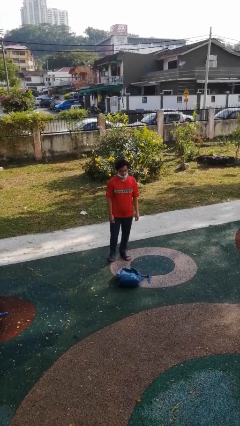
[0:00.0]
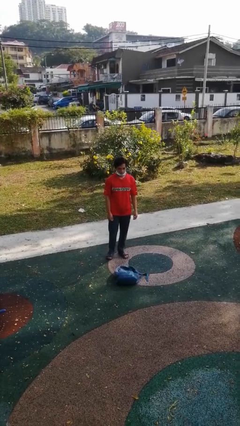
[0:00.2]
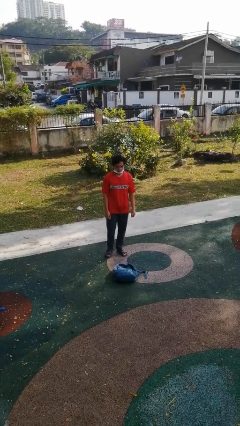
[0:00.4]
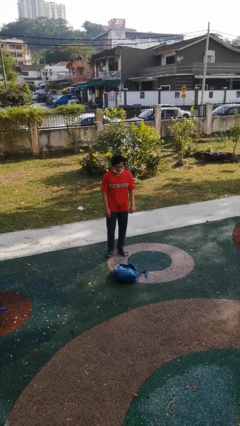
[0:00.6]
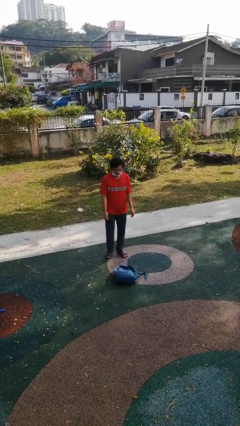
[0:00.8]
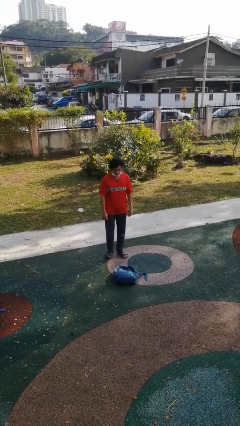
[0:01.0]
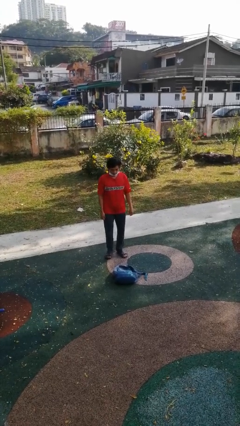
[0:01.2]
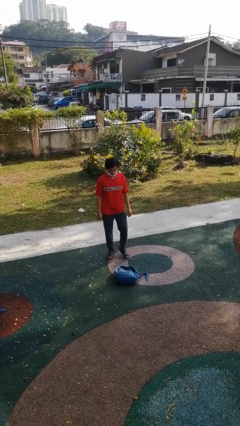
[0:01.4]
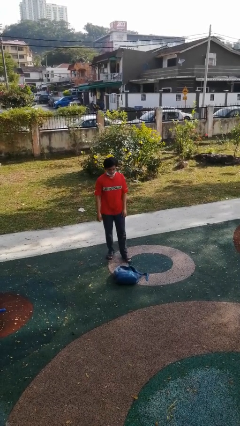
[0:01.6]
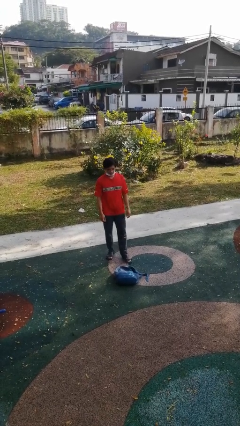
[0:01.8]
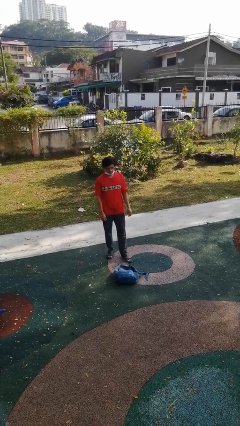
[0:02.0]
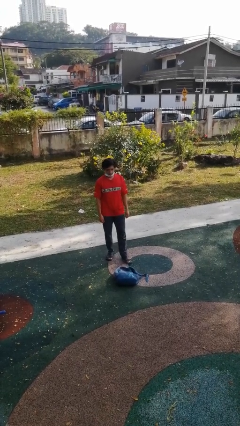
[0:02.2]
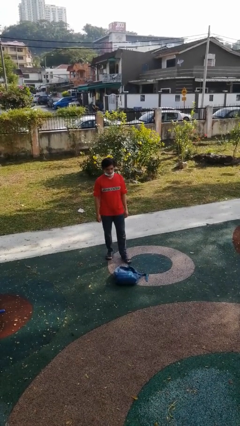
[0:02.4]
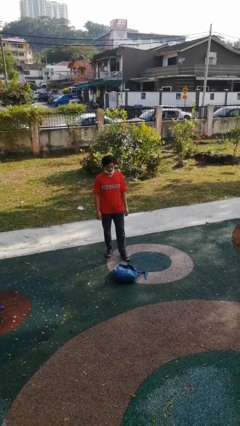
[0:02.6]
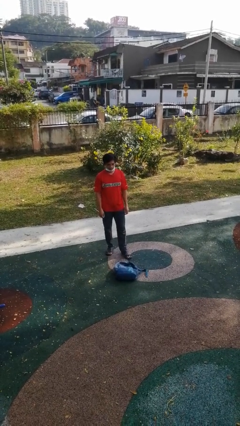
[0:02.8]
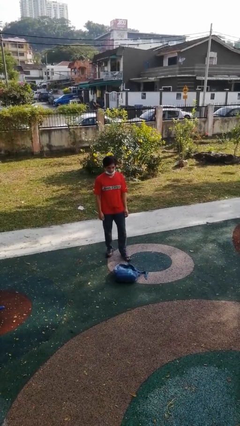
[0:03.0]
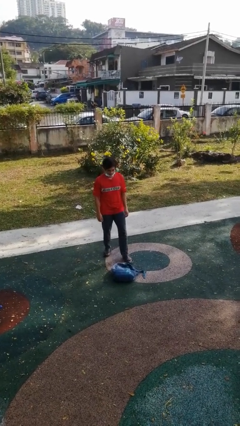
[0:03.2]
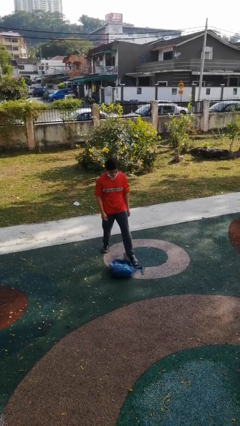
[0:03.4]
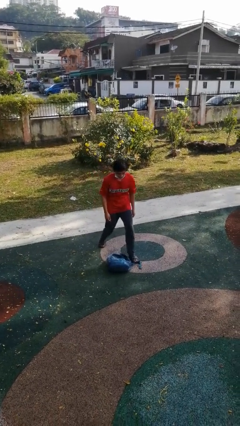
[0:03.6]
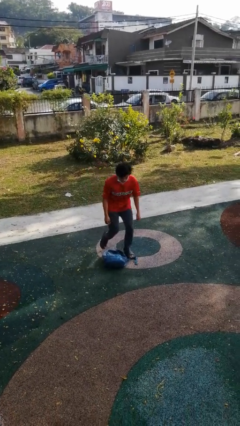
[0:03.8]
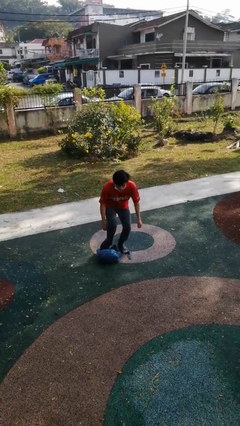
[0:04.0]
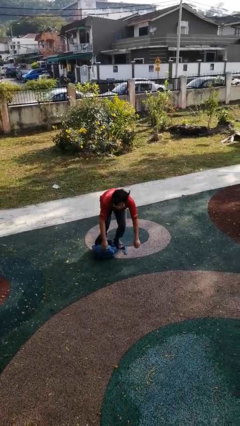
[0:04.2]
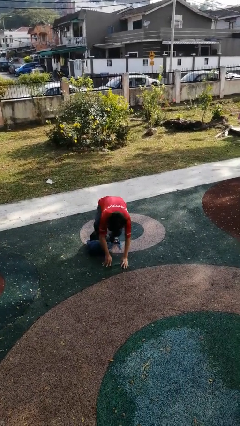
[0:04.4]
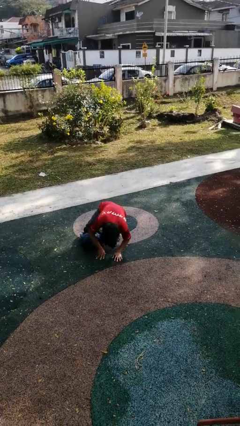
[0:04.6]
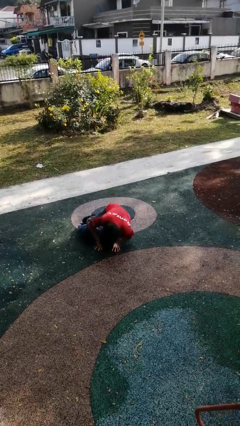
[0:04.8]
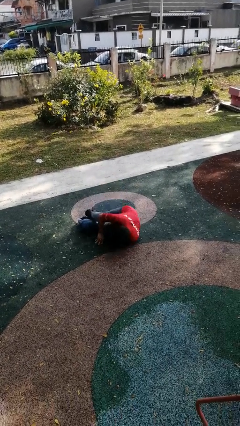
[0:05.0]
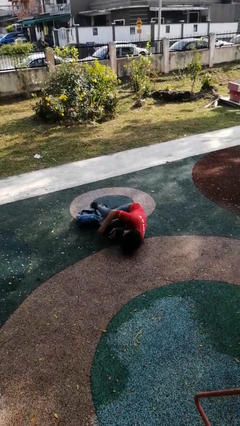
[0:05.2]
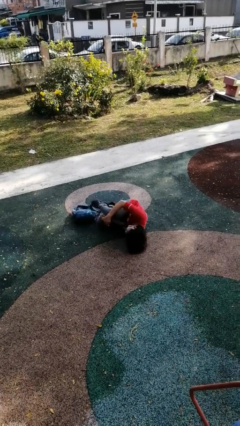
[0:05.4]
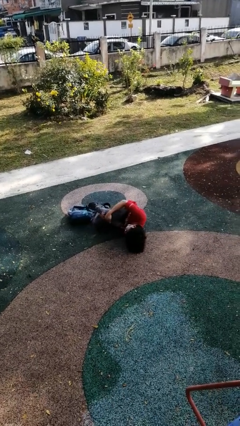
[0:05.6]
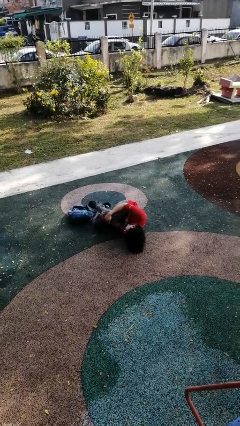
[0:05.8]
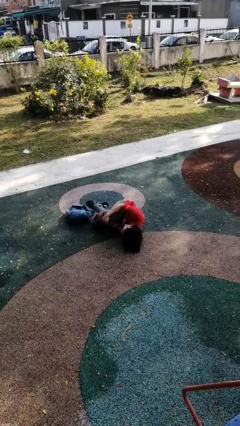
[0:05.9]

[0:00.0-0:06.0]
person trips on object on floor

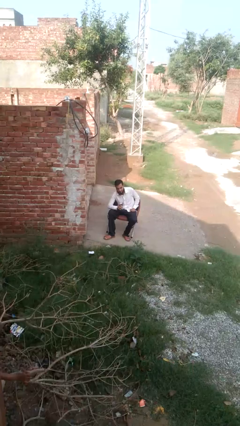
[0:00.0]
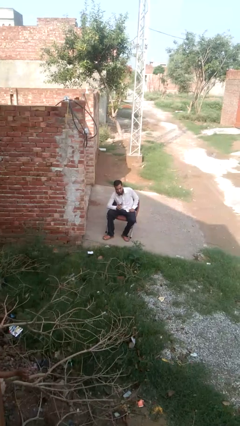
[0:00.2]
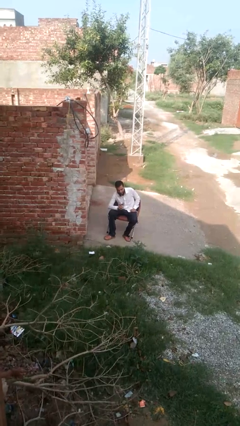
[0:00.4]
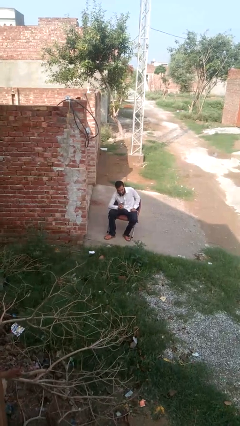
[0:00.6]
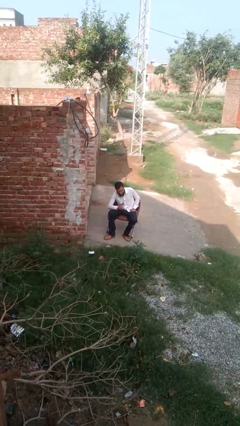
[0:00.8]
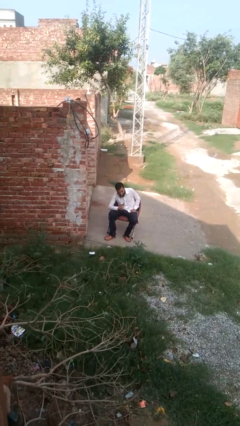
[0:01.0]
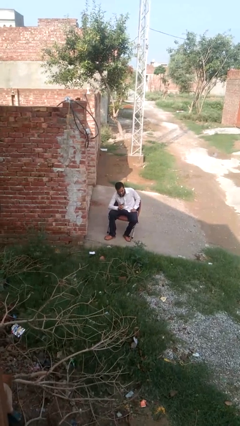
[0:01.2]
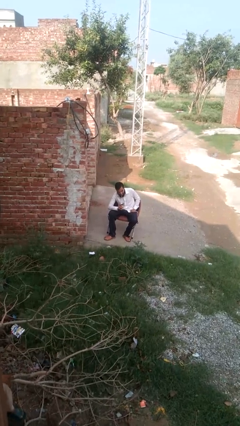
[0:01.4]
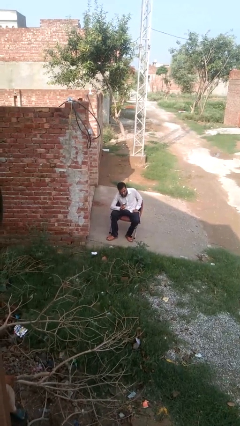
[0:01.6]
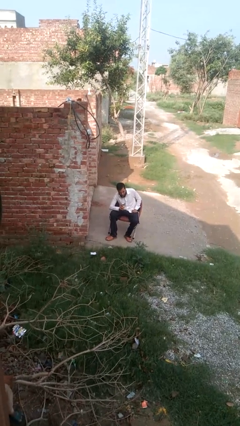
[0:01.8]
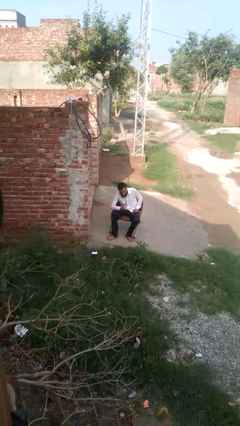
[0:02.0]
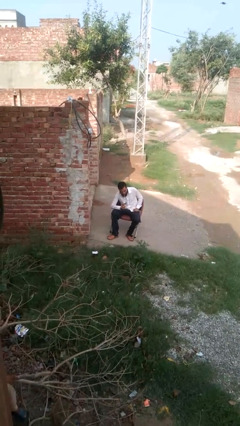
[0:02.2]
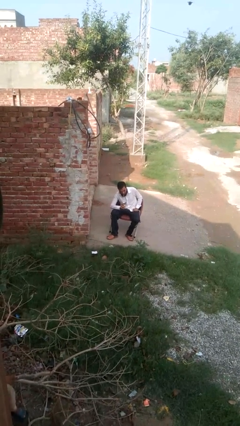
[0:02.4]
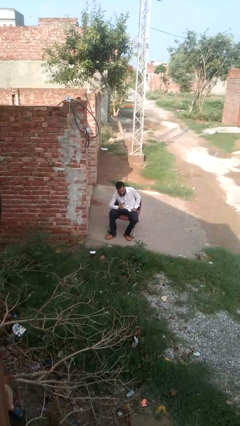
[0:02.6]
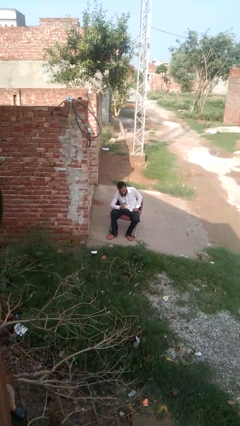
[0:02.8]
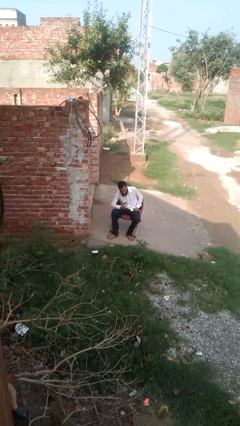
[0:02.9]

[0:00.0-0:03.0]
person drinks from straw

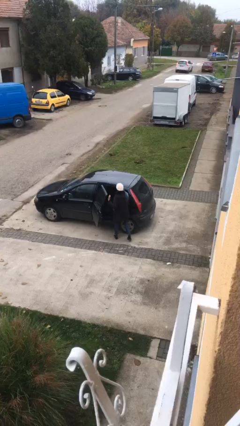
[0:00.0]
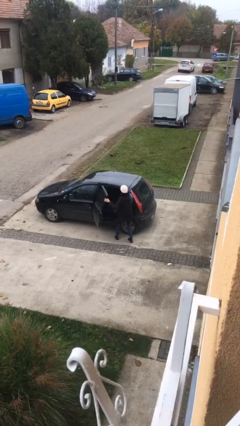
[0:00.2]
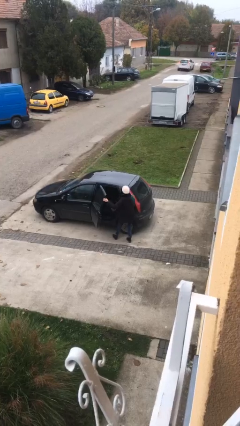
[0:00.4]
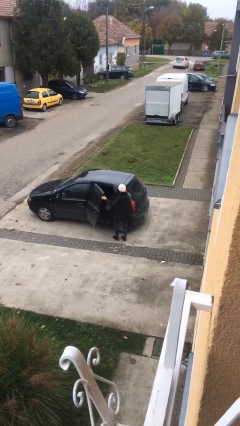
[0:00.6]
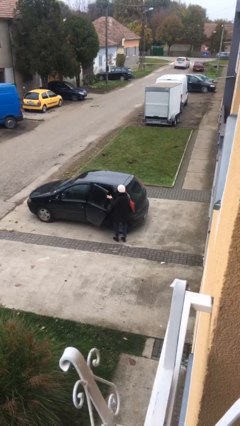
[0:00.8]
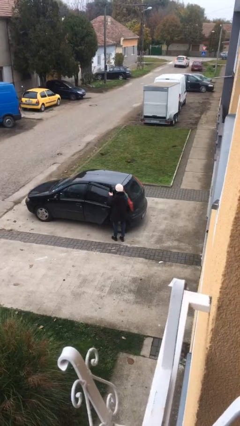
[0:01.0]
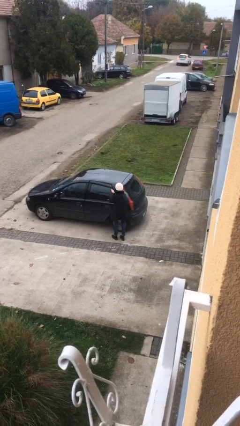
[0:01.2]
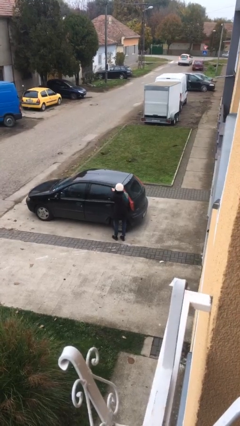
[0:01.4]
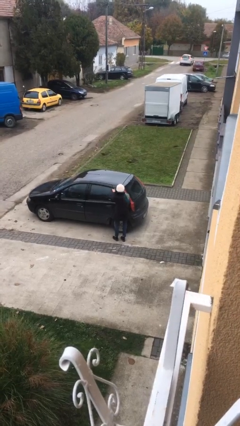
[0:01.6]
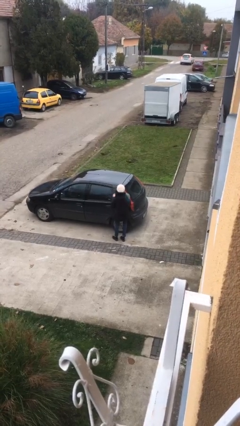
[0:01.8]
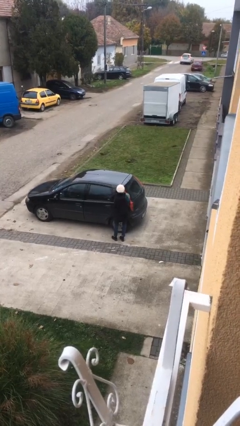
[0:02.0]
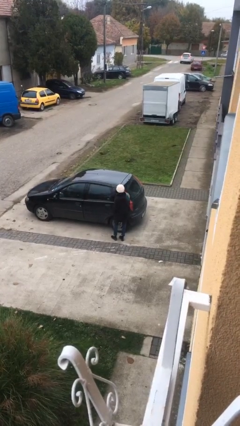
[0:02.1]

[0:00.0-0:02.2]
person closes car door

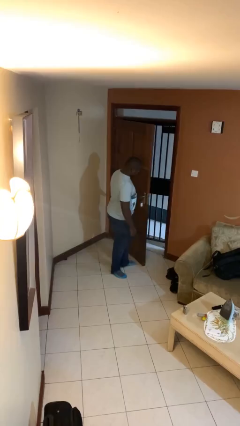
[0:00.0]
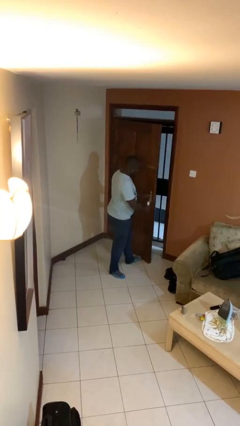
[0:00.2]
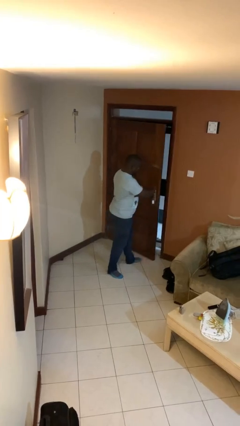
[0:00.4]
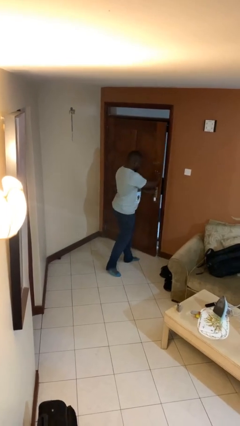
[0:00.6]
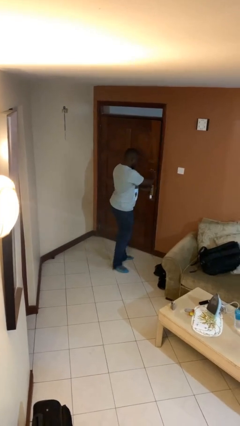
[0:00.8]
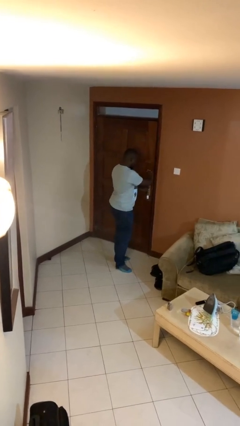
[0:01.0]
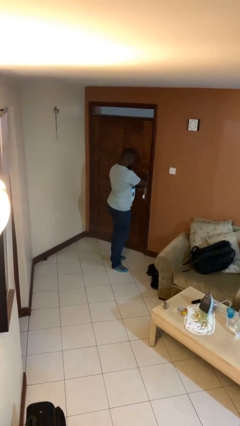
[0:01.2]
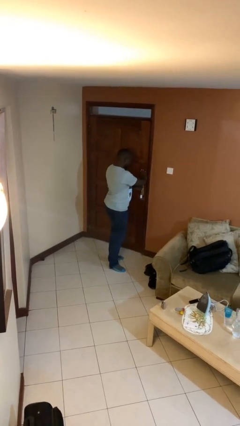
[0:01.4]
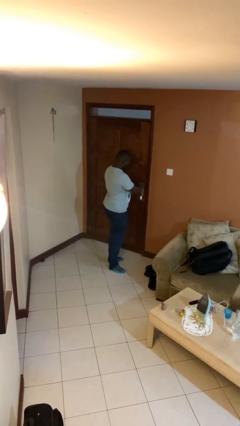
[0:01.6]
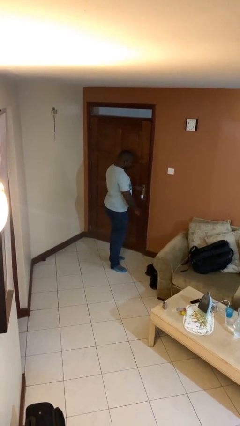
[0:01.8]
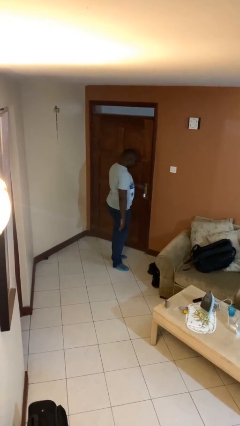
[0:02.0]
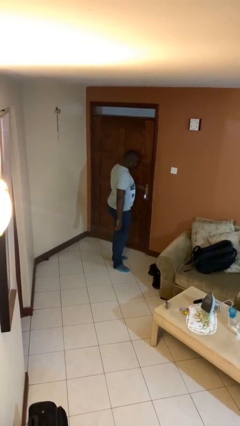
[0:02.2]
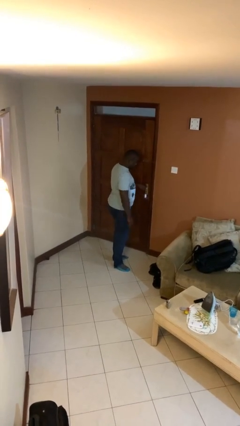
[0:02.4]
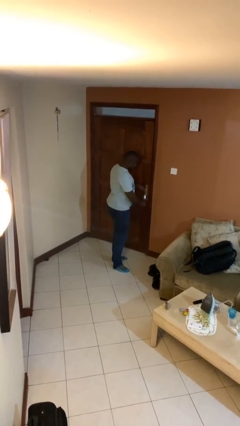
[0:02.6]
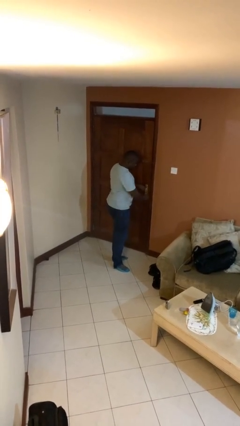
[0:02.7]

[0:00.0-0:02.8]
person closes facility door

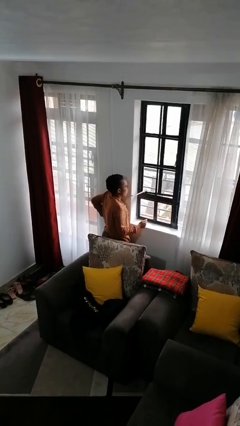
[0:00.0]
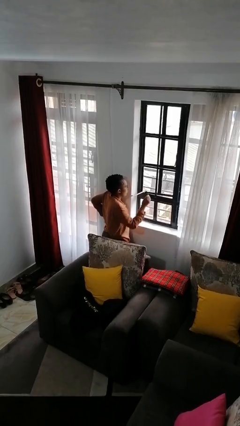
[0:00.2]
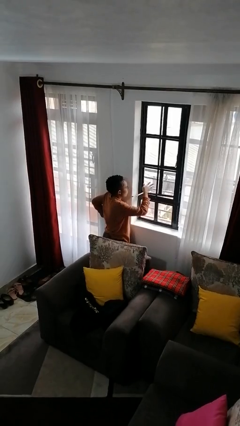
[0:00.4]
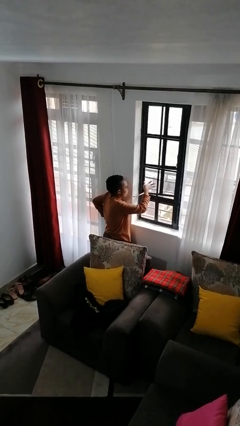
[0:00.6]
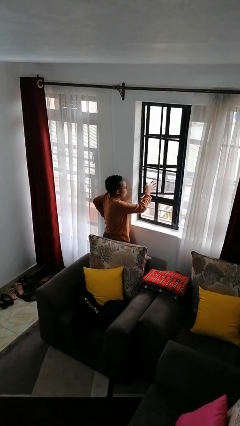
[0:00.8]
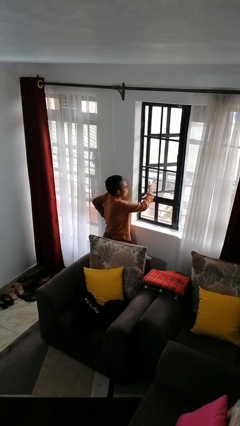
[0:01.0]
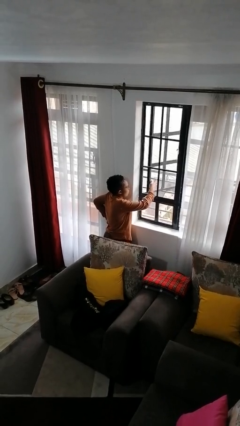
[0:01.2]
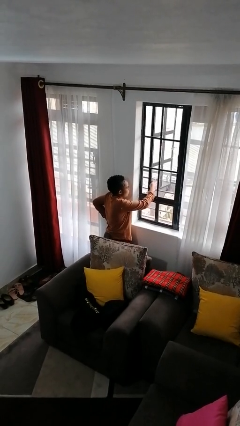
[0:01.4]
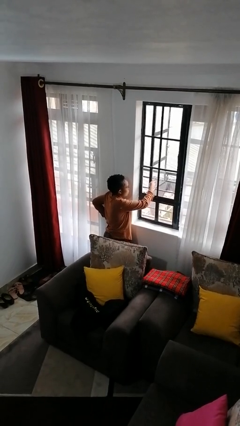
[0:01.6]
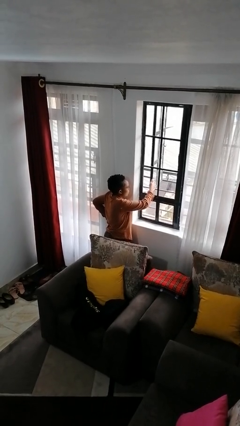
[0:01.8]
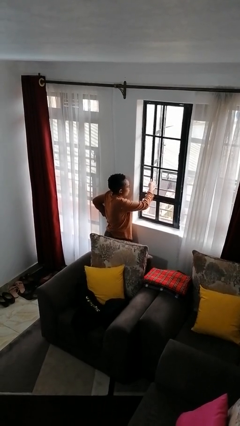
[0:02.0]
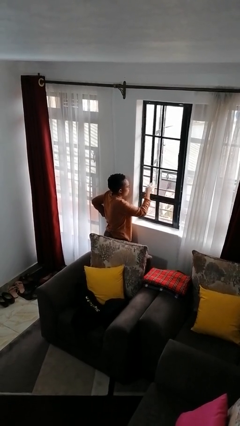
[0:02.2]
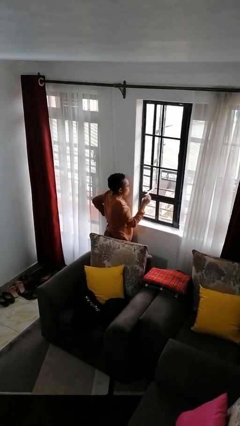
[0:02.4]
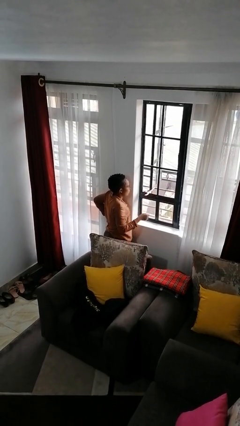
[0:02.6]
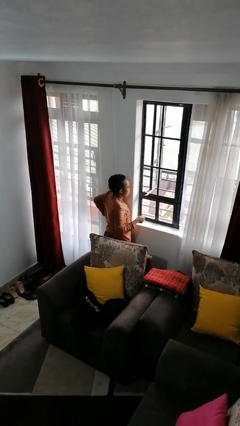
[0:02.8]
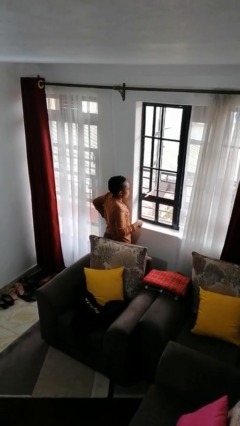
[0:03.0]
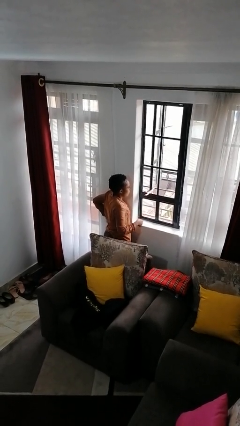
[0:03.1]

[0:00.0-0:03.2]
person opens home window

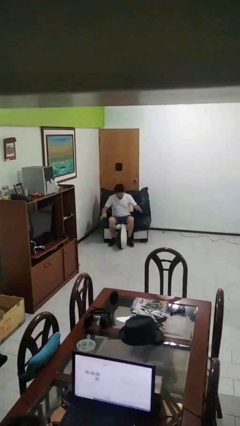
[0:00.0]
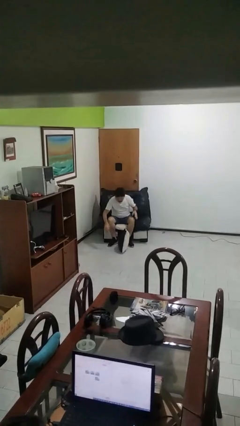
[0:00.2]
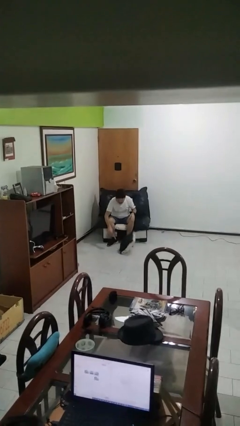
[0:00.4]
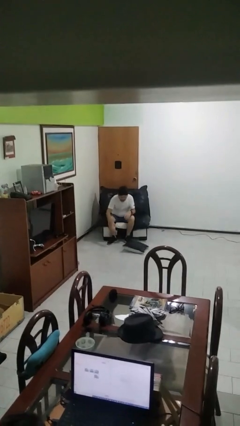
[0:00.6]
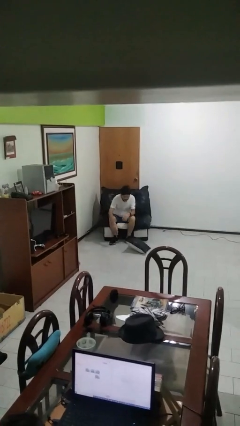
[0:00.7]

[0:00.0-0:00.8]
person drops object
